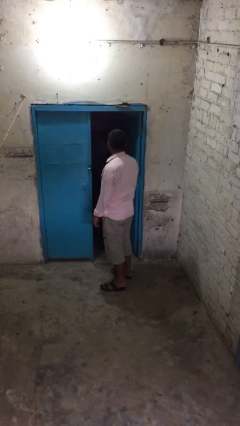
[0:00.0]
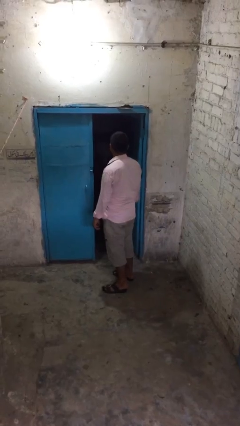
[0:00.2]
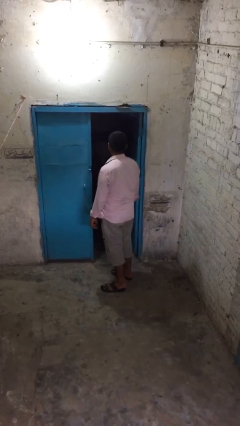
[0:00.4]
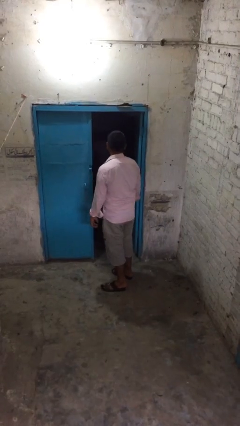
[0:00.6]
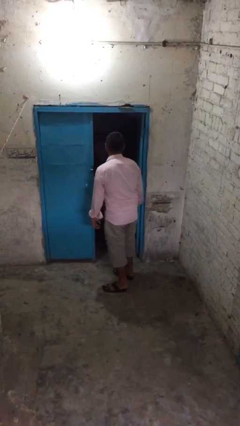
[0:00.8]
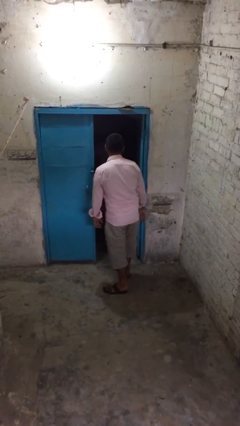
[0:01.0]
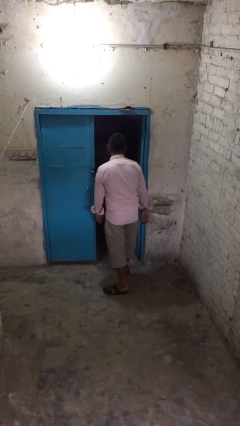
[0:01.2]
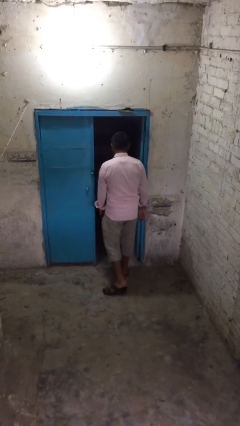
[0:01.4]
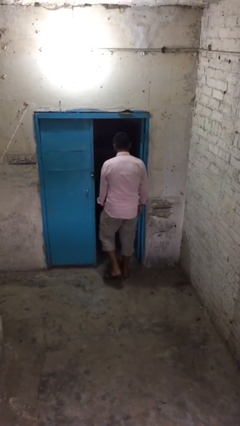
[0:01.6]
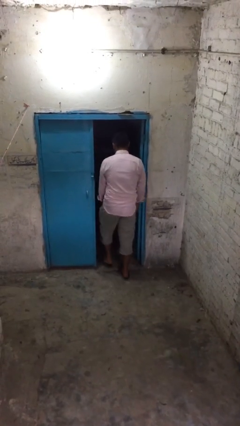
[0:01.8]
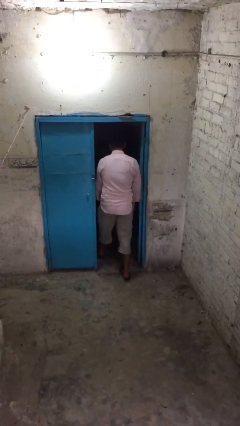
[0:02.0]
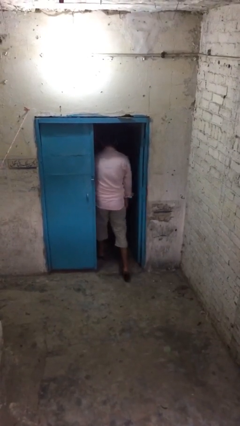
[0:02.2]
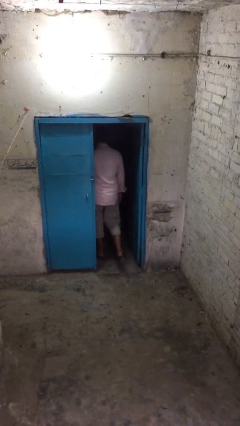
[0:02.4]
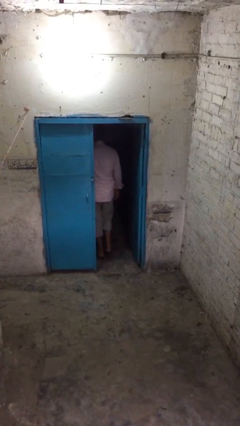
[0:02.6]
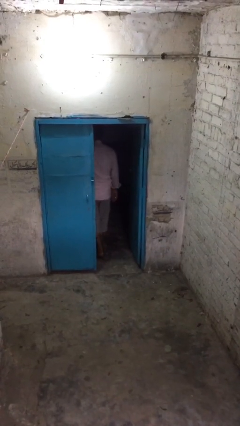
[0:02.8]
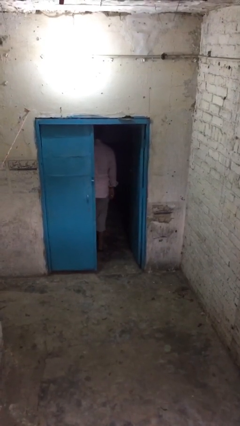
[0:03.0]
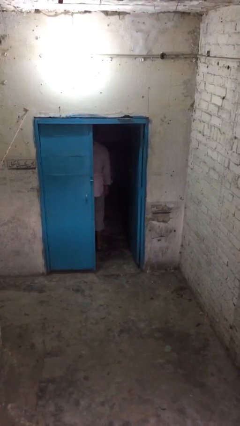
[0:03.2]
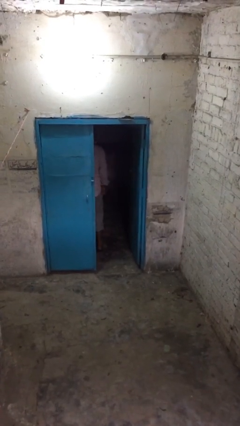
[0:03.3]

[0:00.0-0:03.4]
person exits scene through structure

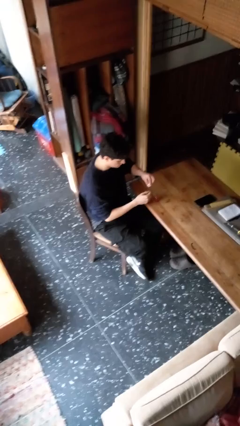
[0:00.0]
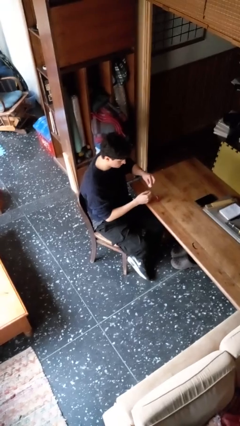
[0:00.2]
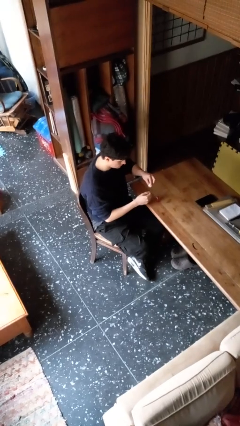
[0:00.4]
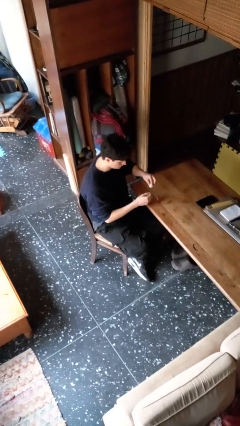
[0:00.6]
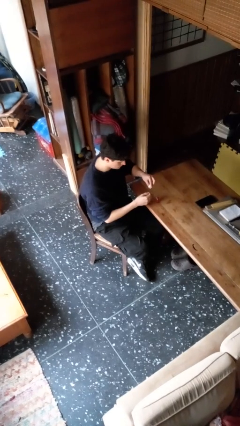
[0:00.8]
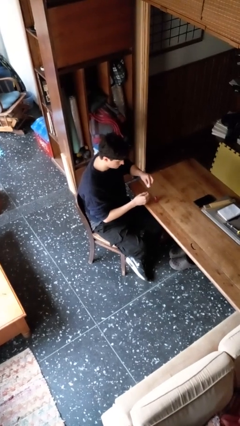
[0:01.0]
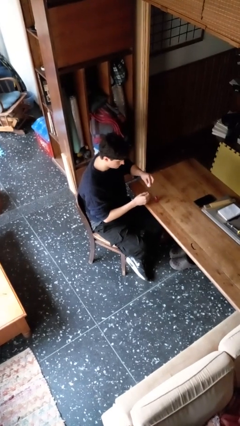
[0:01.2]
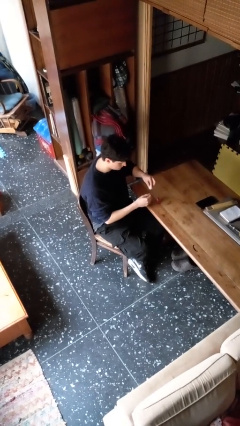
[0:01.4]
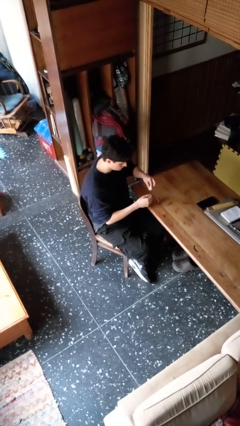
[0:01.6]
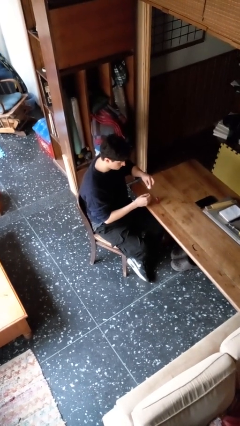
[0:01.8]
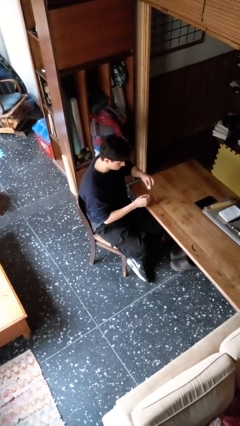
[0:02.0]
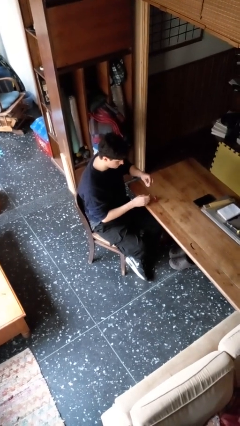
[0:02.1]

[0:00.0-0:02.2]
person paints fingernails

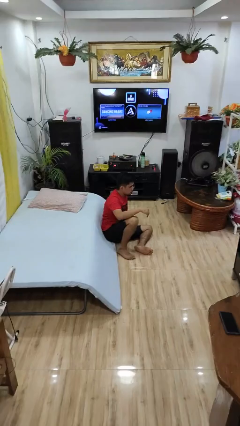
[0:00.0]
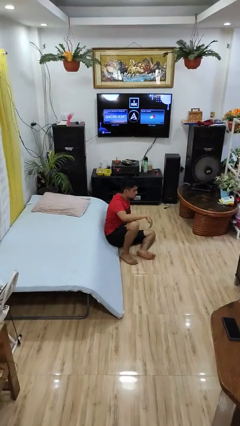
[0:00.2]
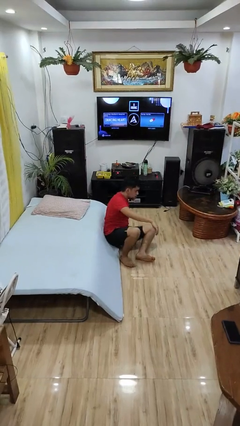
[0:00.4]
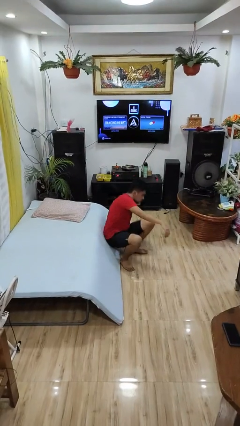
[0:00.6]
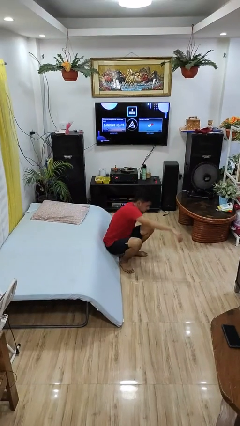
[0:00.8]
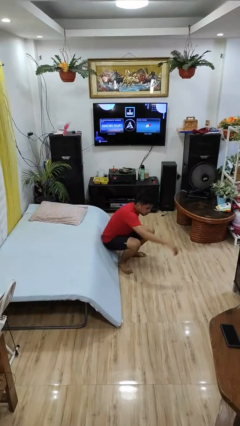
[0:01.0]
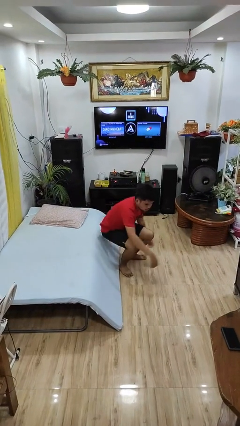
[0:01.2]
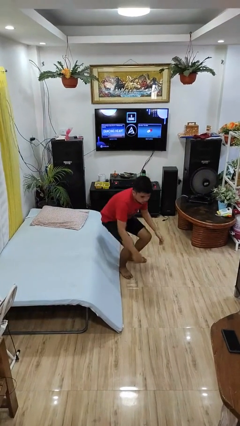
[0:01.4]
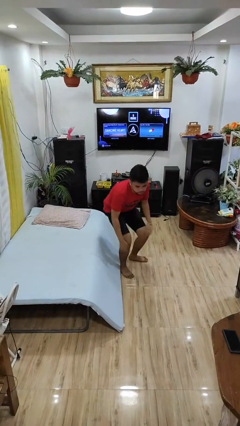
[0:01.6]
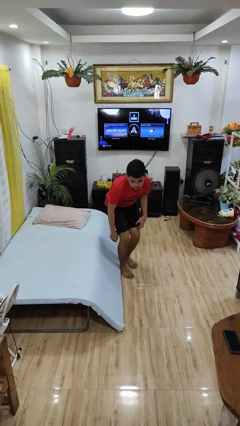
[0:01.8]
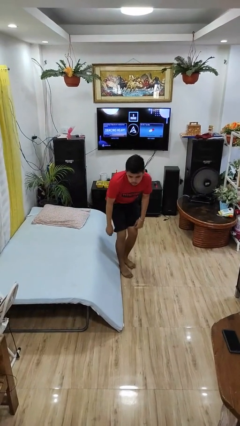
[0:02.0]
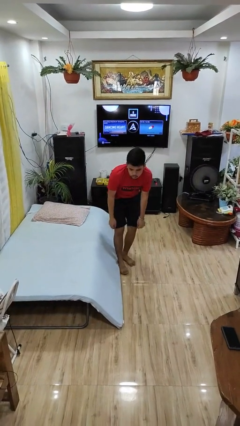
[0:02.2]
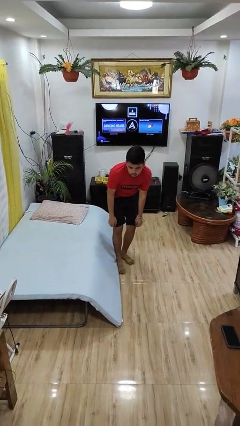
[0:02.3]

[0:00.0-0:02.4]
person stands up from floor

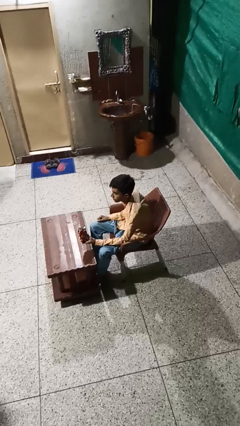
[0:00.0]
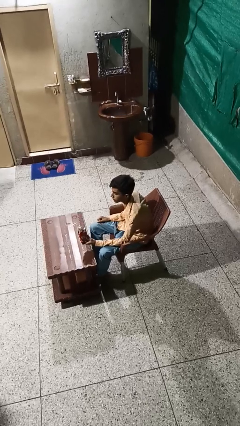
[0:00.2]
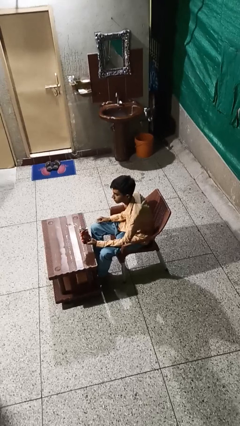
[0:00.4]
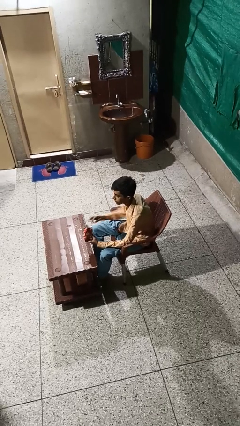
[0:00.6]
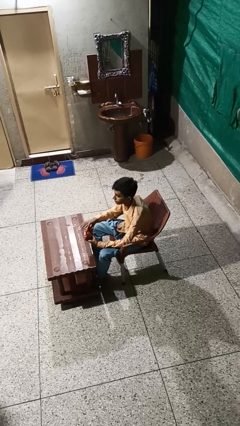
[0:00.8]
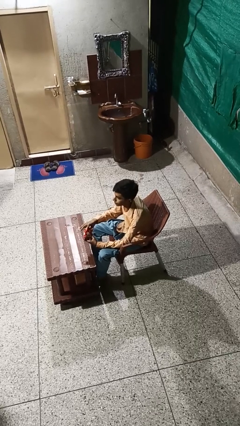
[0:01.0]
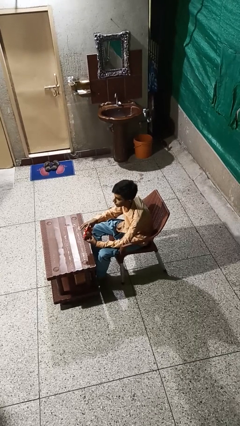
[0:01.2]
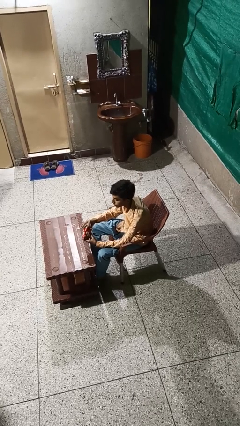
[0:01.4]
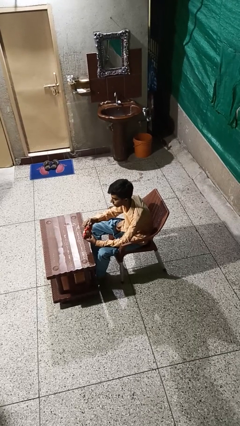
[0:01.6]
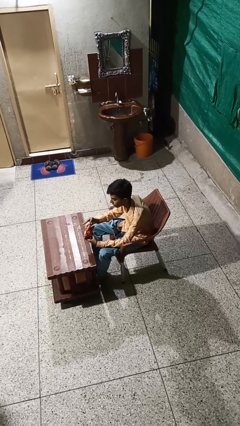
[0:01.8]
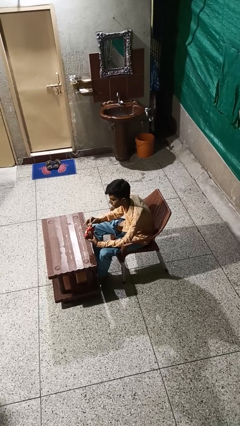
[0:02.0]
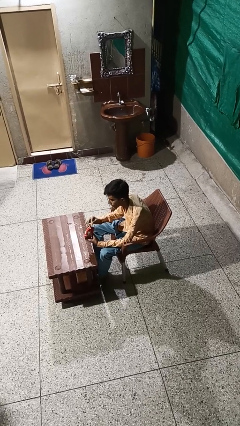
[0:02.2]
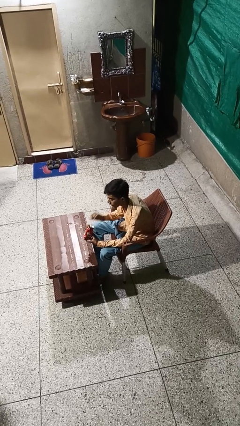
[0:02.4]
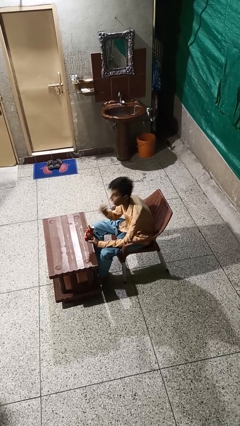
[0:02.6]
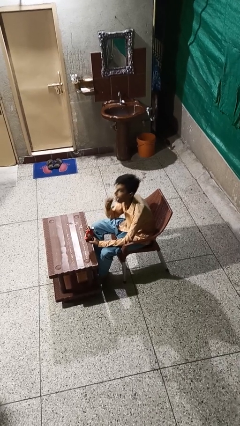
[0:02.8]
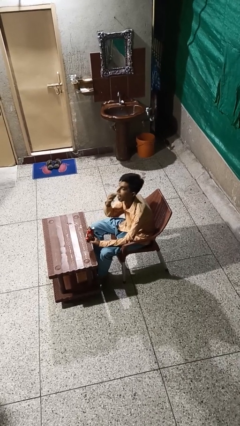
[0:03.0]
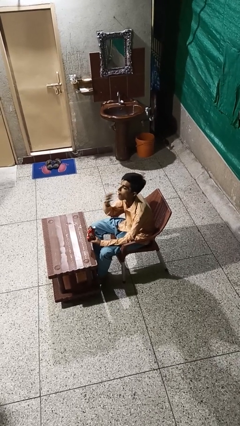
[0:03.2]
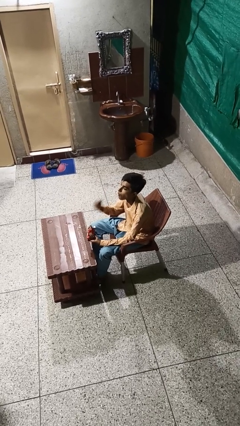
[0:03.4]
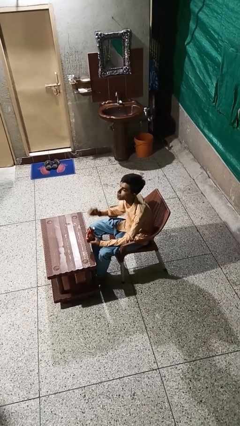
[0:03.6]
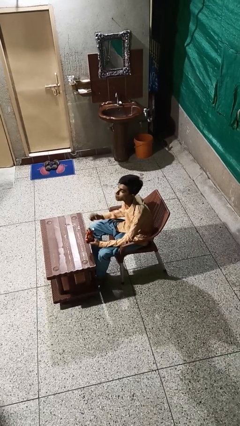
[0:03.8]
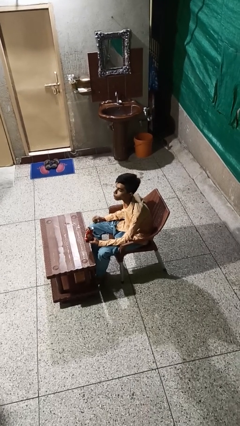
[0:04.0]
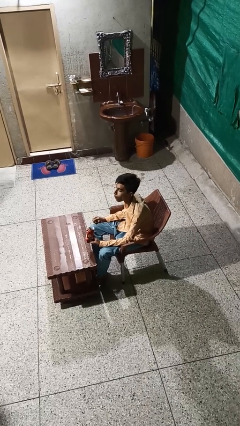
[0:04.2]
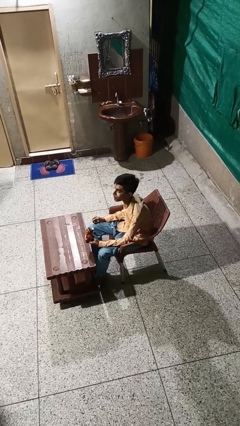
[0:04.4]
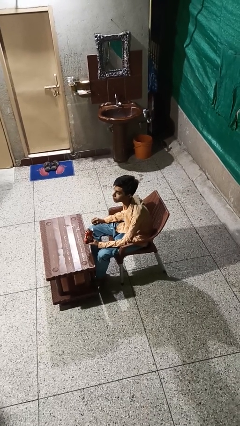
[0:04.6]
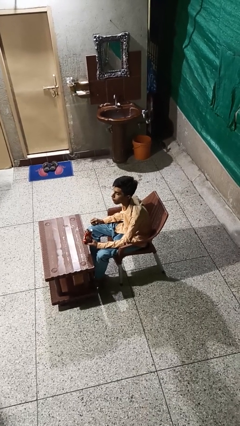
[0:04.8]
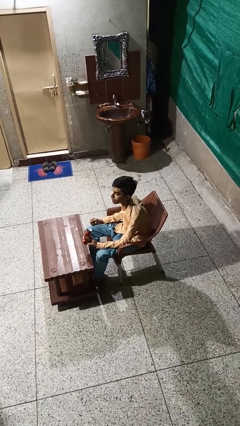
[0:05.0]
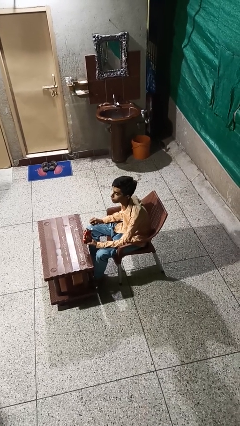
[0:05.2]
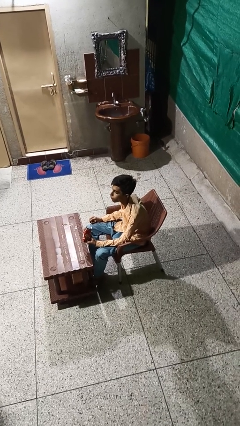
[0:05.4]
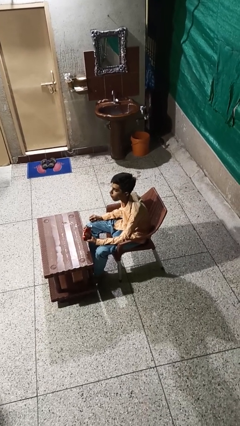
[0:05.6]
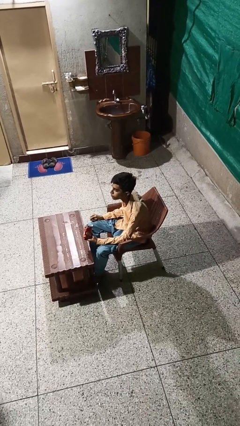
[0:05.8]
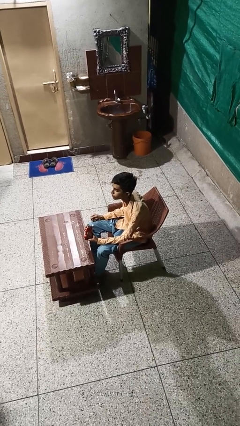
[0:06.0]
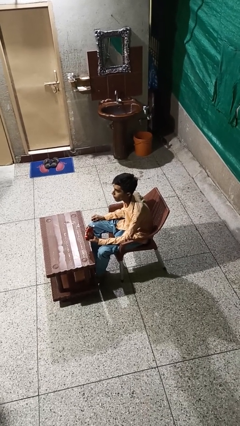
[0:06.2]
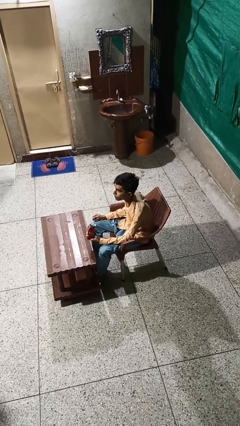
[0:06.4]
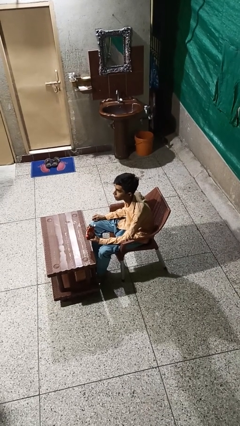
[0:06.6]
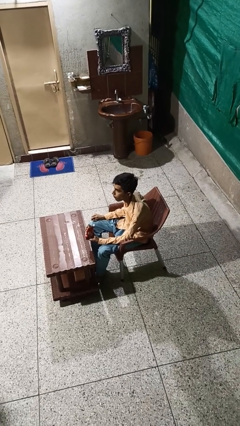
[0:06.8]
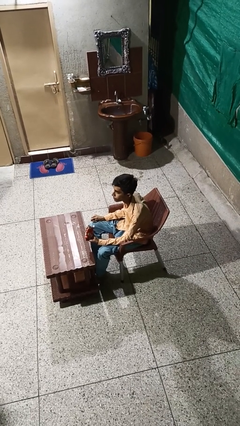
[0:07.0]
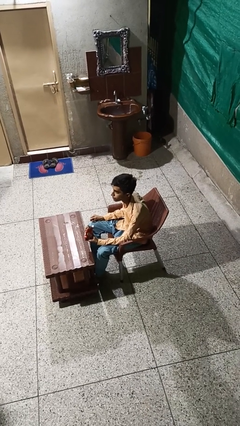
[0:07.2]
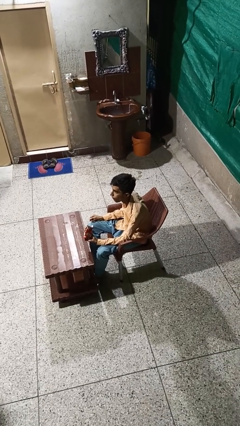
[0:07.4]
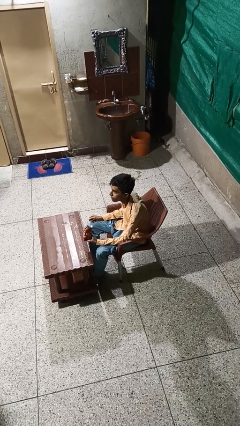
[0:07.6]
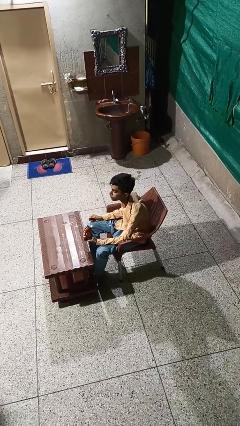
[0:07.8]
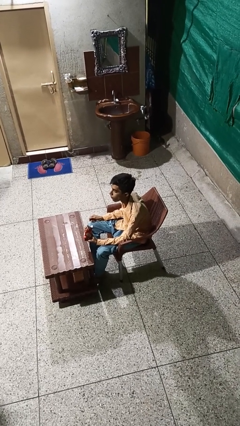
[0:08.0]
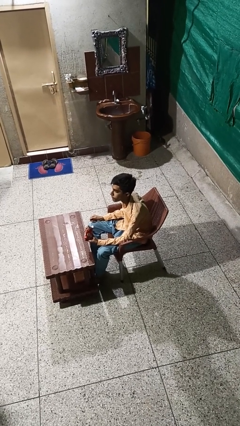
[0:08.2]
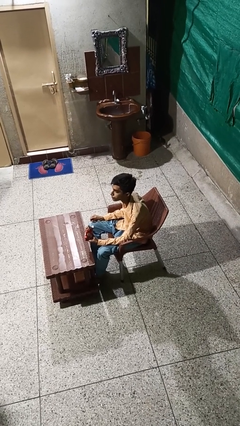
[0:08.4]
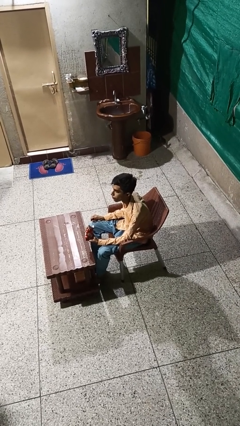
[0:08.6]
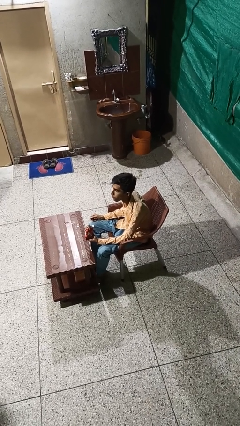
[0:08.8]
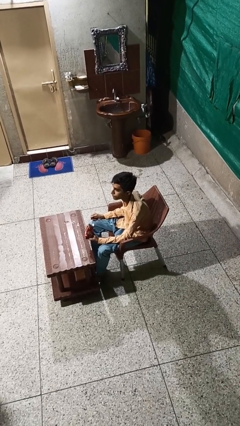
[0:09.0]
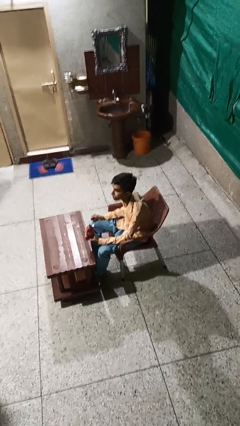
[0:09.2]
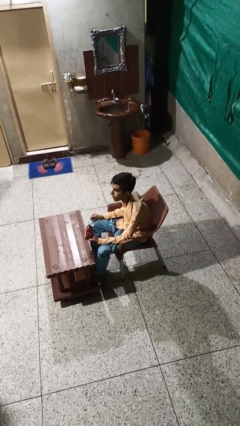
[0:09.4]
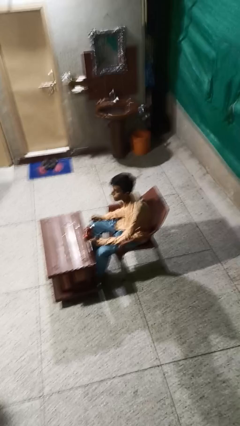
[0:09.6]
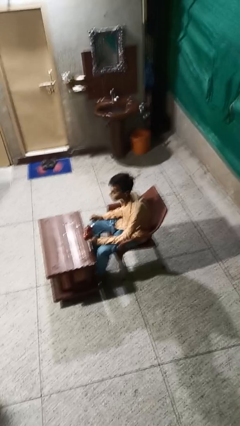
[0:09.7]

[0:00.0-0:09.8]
person eats snack from bag
